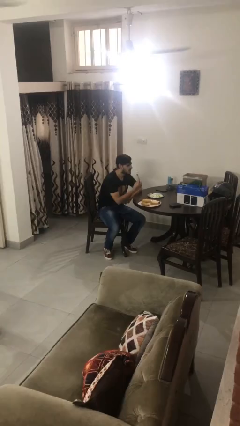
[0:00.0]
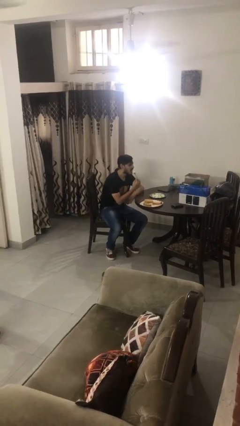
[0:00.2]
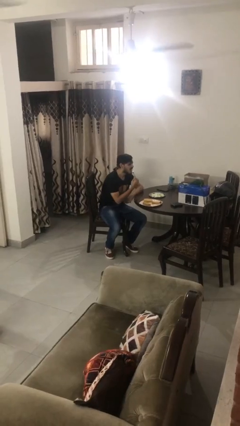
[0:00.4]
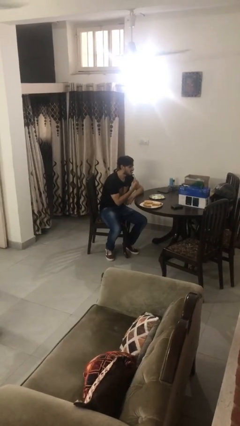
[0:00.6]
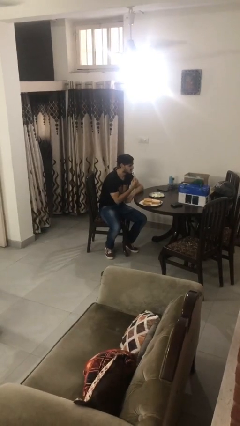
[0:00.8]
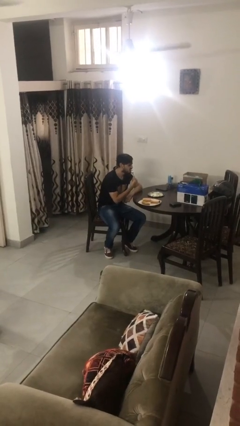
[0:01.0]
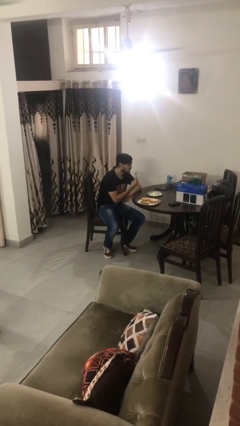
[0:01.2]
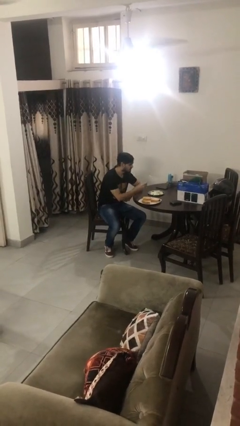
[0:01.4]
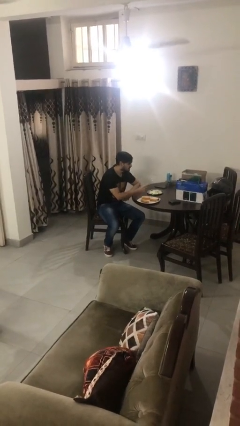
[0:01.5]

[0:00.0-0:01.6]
person eats with utensil

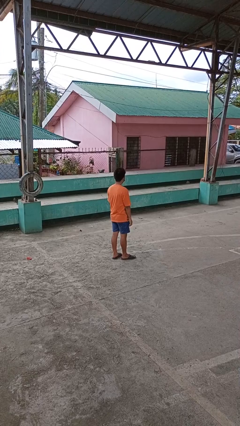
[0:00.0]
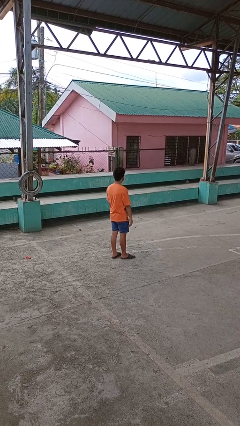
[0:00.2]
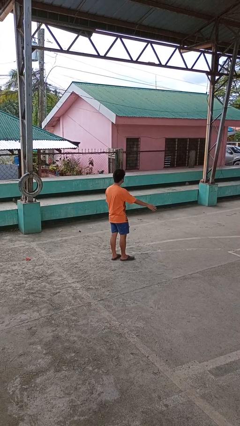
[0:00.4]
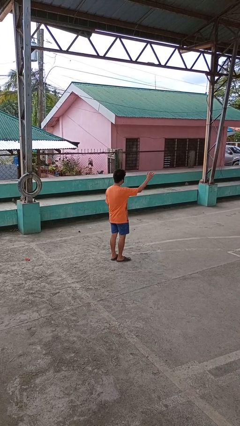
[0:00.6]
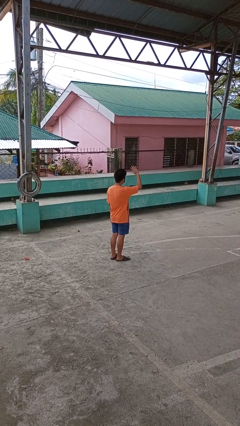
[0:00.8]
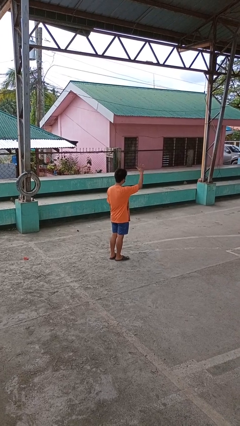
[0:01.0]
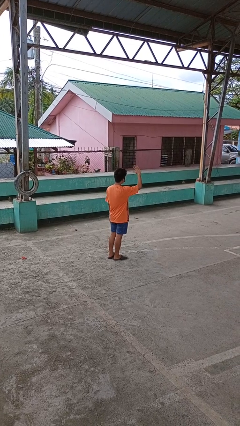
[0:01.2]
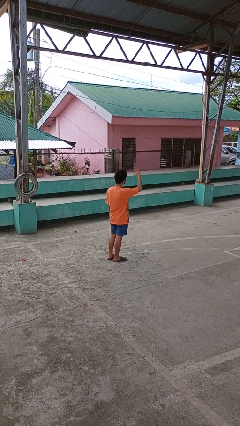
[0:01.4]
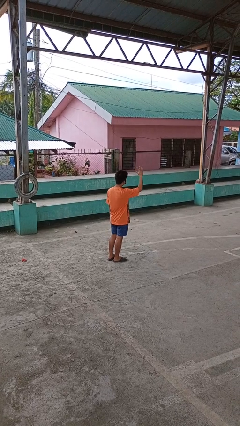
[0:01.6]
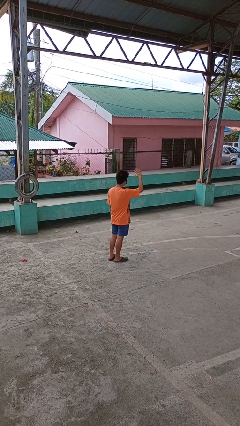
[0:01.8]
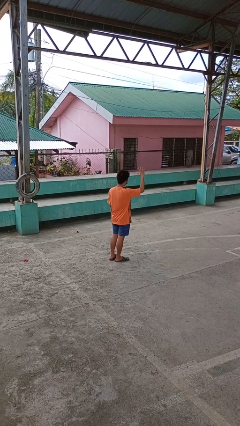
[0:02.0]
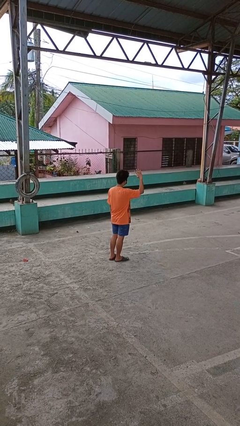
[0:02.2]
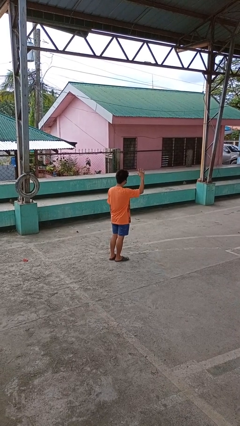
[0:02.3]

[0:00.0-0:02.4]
person waves at person

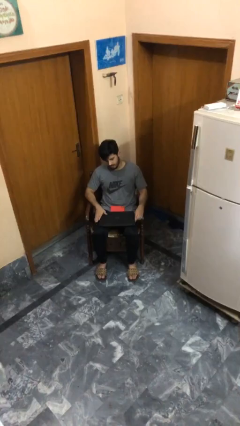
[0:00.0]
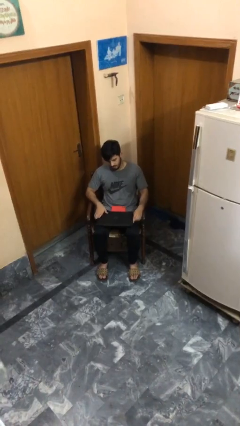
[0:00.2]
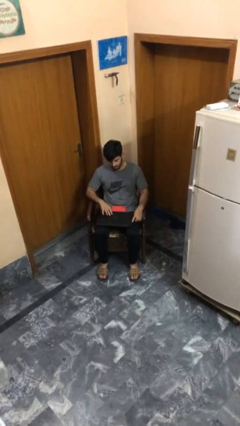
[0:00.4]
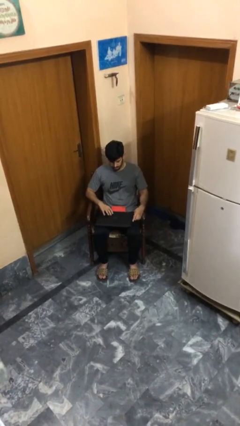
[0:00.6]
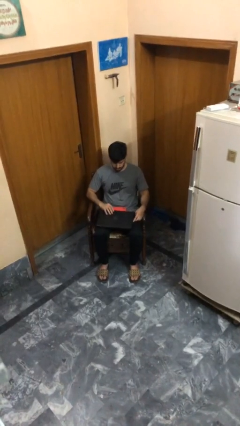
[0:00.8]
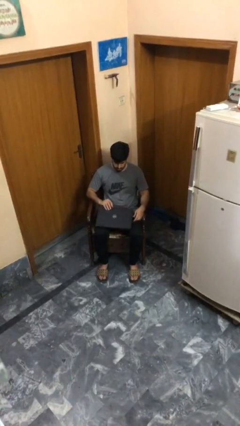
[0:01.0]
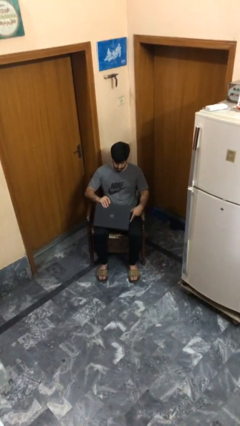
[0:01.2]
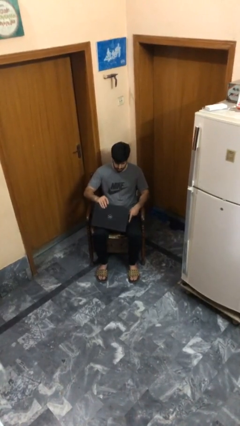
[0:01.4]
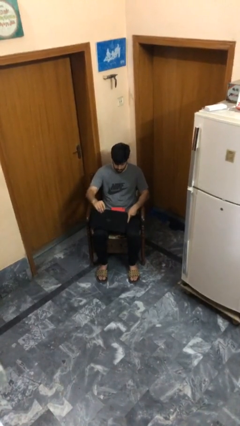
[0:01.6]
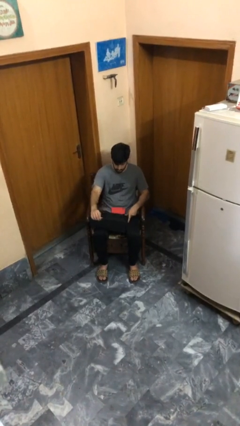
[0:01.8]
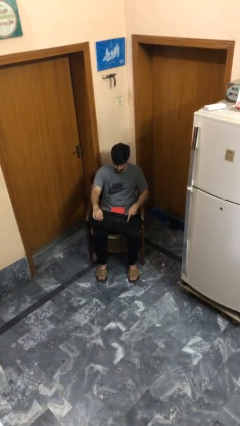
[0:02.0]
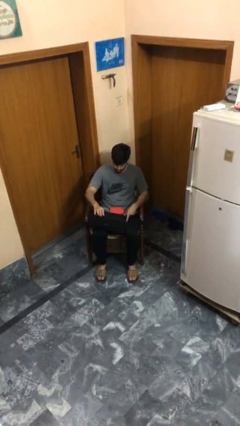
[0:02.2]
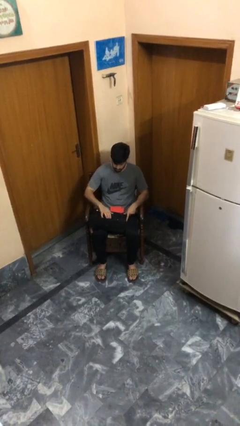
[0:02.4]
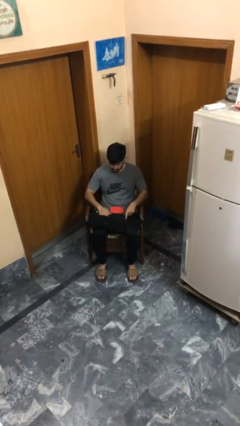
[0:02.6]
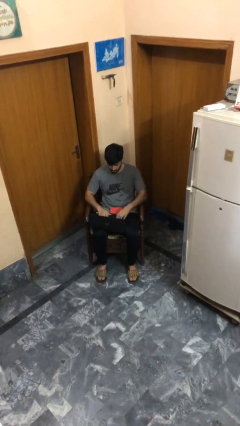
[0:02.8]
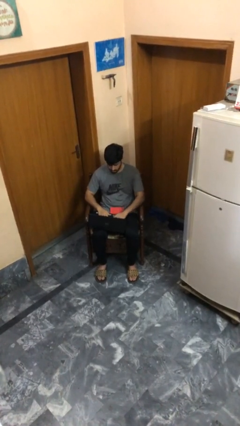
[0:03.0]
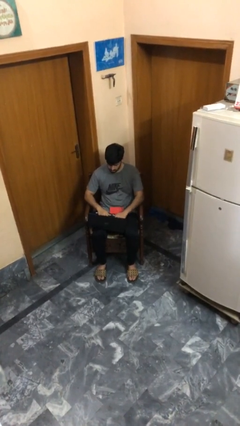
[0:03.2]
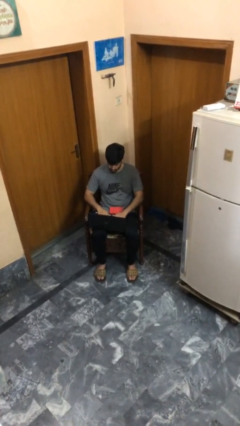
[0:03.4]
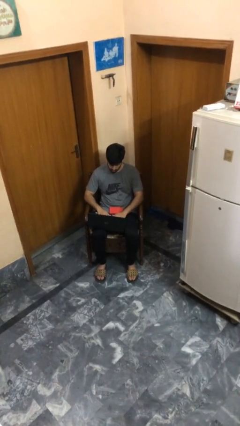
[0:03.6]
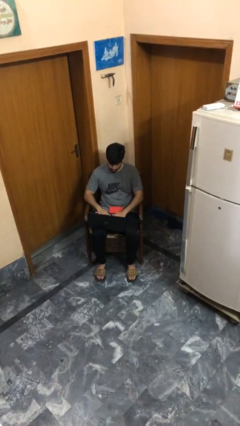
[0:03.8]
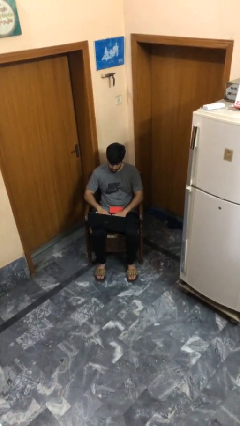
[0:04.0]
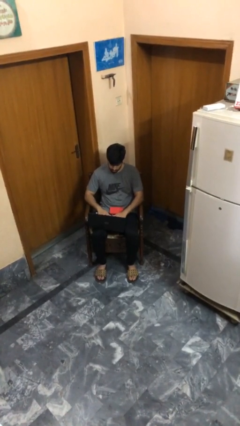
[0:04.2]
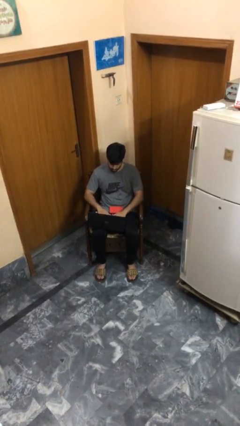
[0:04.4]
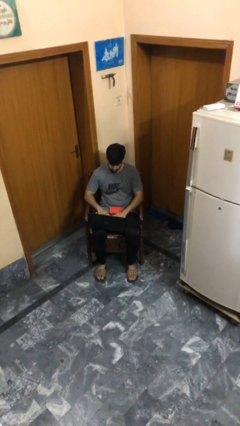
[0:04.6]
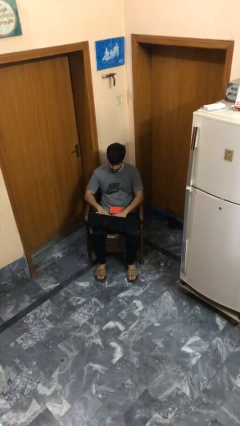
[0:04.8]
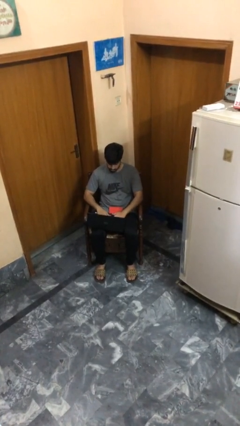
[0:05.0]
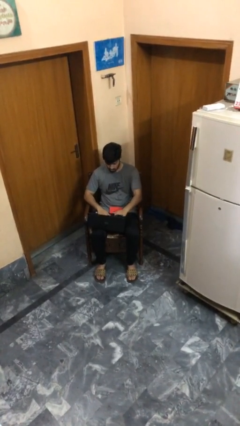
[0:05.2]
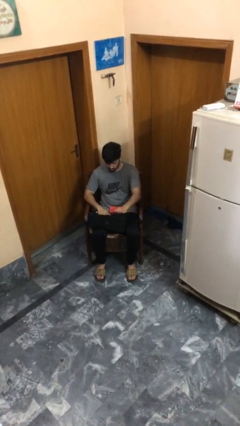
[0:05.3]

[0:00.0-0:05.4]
person opens laptop

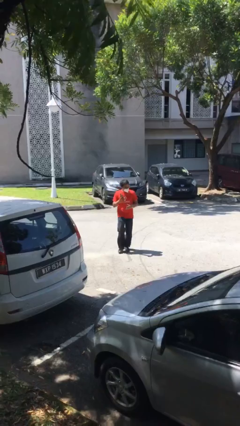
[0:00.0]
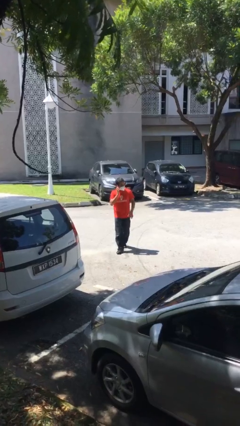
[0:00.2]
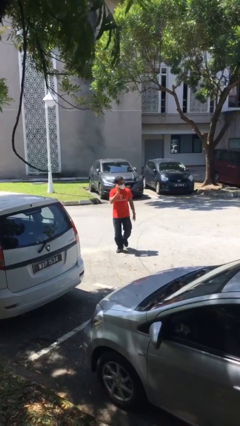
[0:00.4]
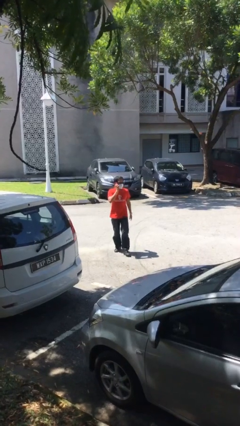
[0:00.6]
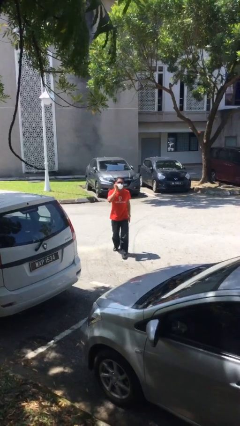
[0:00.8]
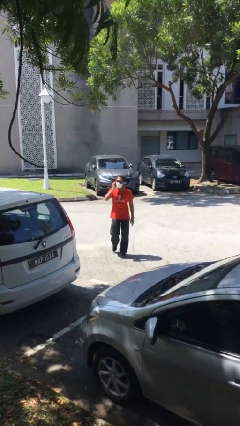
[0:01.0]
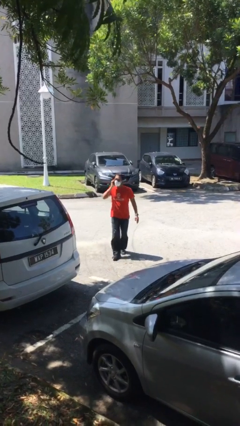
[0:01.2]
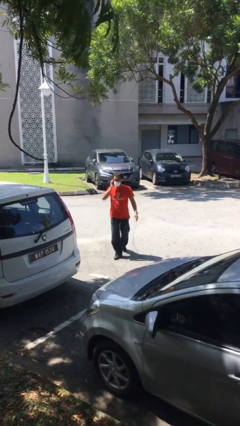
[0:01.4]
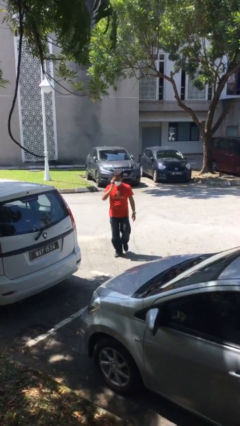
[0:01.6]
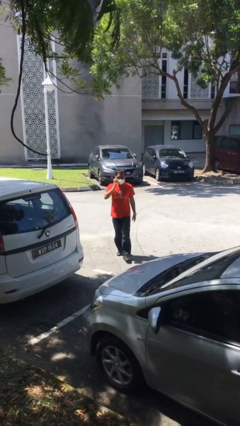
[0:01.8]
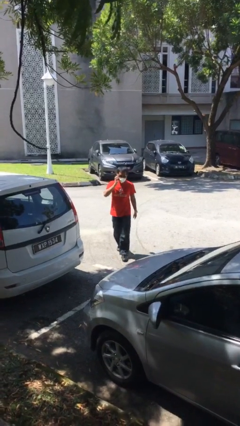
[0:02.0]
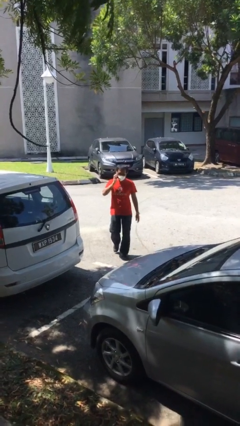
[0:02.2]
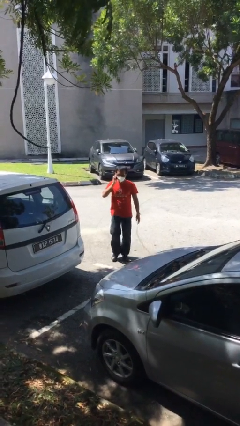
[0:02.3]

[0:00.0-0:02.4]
person talks on phone

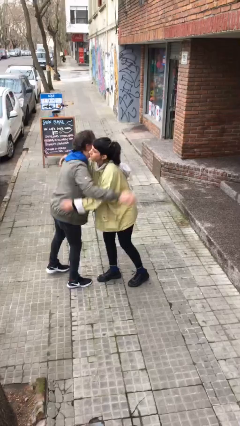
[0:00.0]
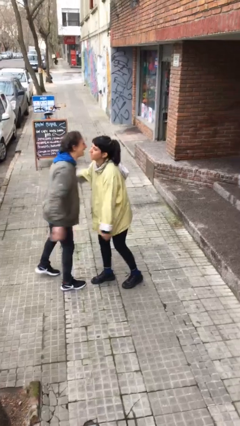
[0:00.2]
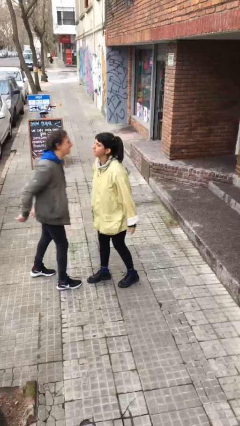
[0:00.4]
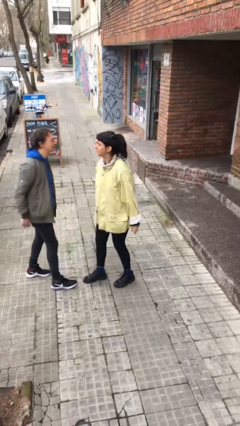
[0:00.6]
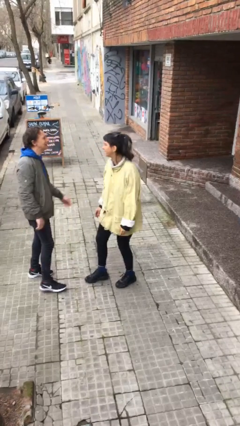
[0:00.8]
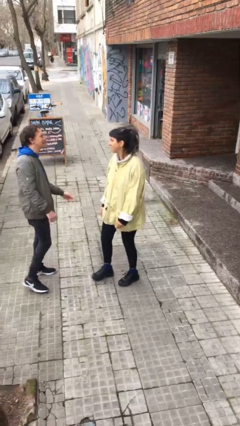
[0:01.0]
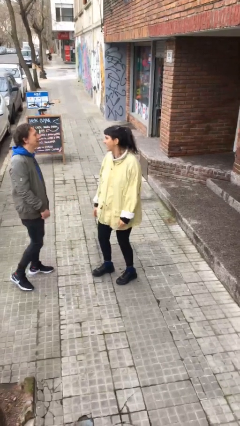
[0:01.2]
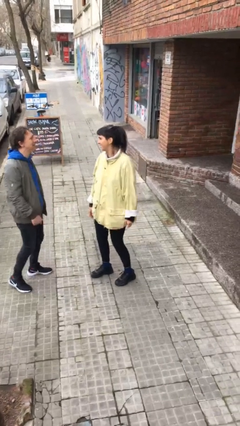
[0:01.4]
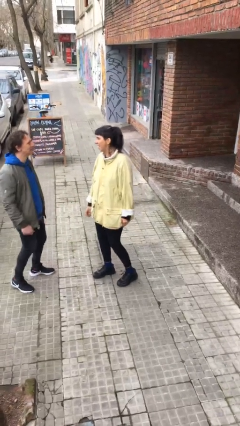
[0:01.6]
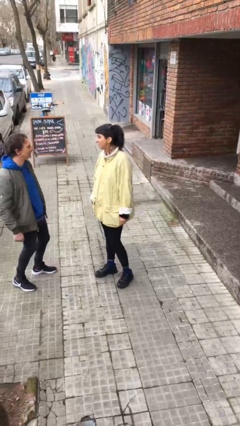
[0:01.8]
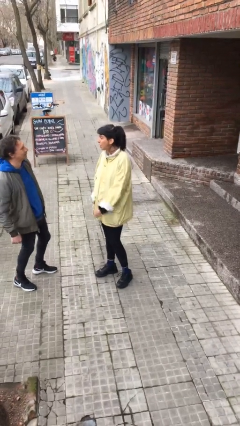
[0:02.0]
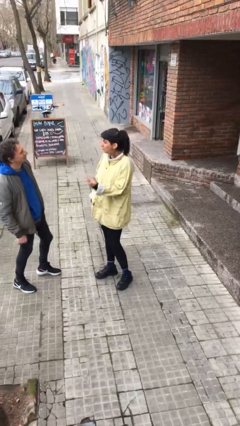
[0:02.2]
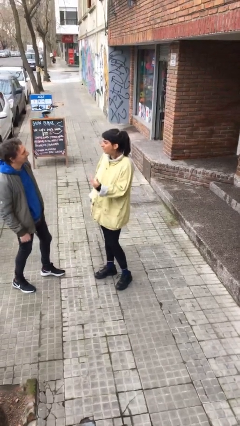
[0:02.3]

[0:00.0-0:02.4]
person talks to person

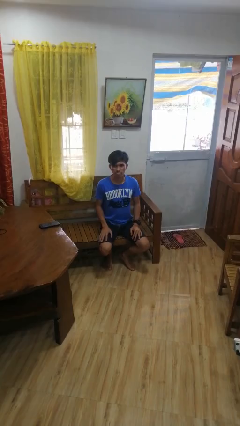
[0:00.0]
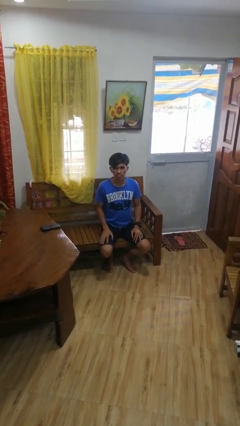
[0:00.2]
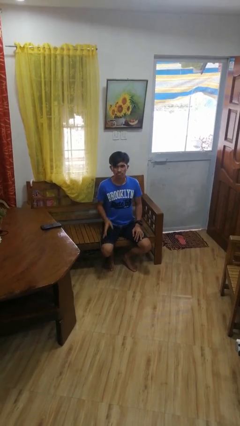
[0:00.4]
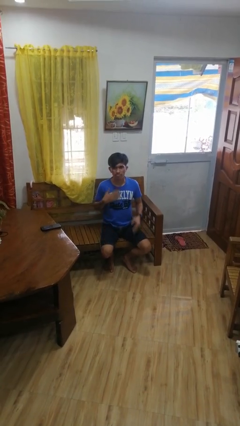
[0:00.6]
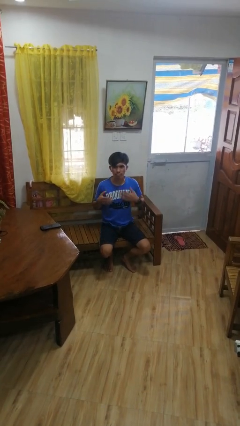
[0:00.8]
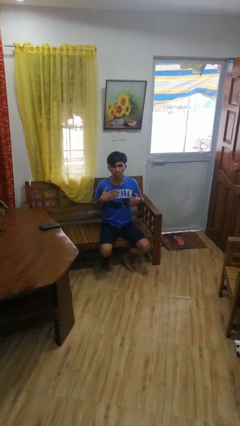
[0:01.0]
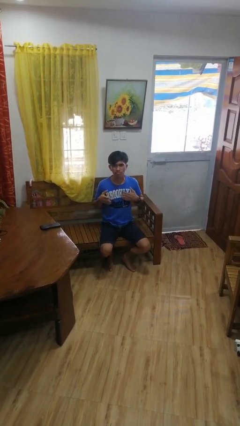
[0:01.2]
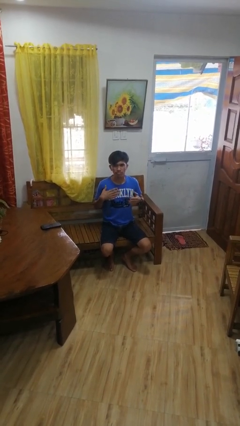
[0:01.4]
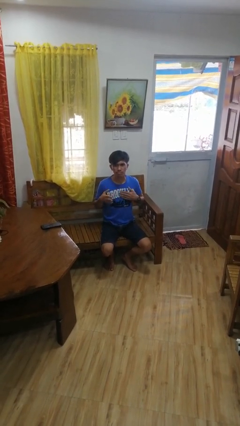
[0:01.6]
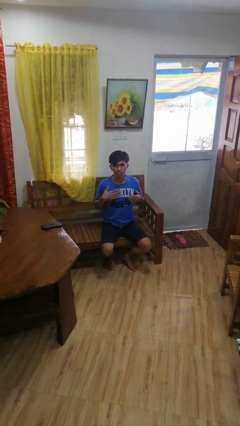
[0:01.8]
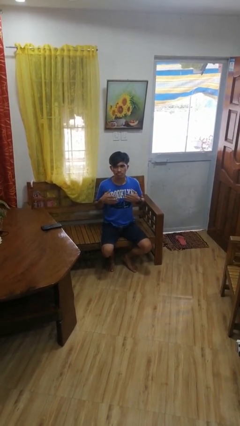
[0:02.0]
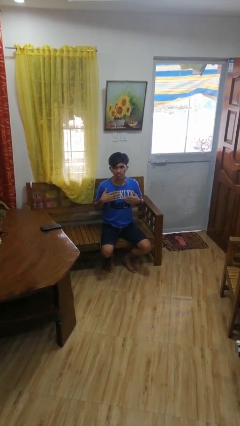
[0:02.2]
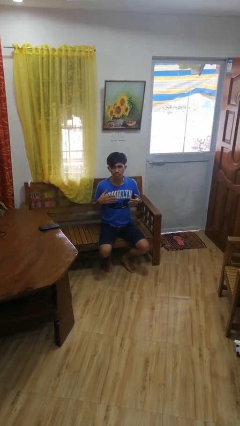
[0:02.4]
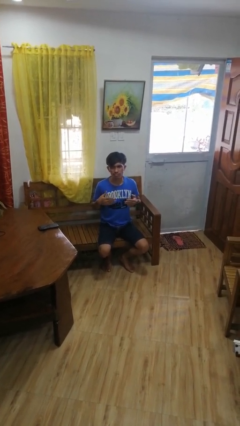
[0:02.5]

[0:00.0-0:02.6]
person drums on chest

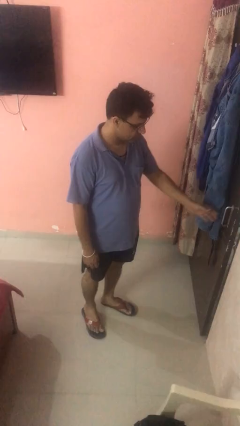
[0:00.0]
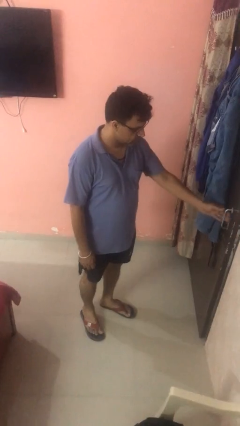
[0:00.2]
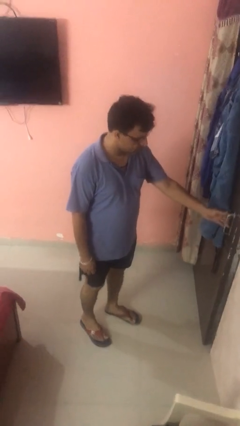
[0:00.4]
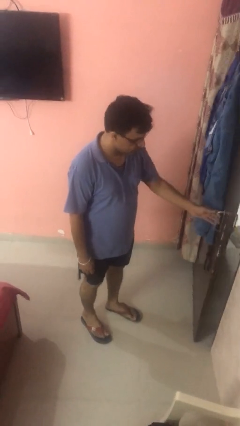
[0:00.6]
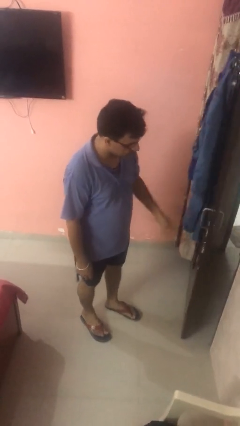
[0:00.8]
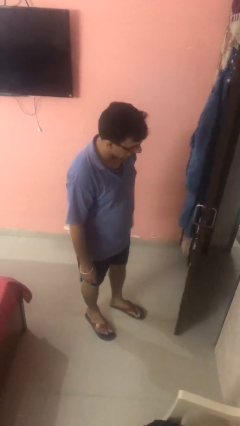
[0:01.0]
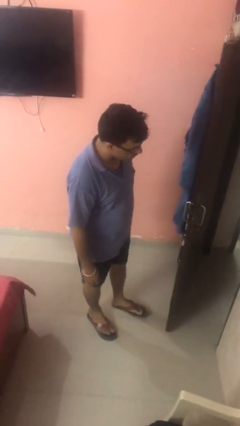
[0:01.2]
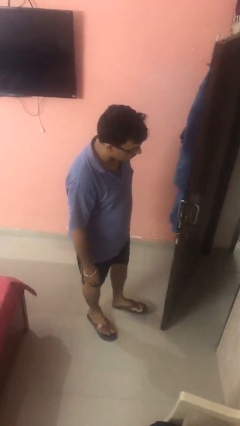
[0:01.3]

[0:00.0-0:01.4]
person opens facility door
